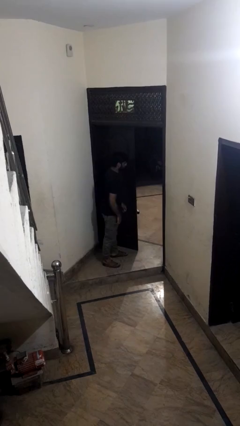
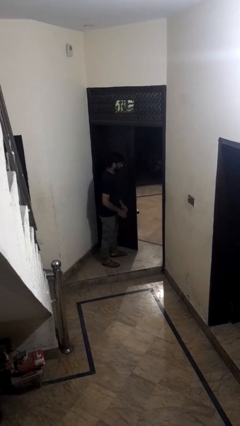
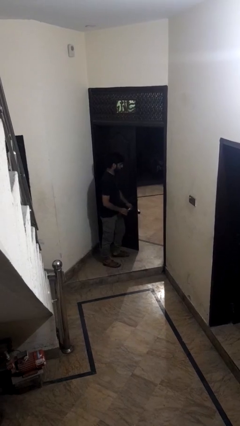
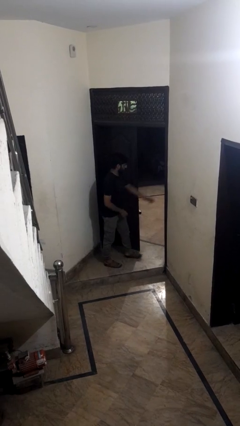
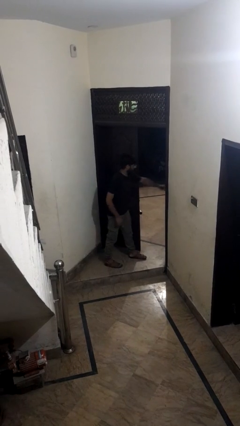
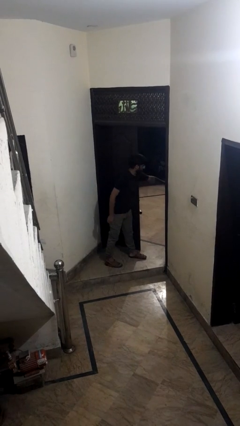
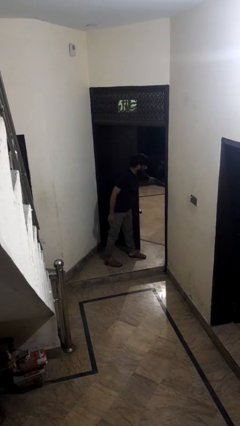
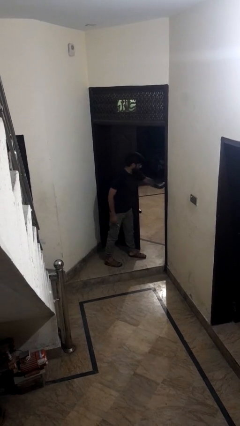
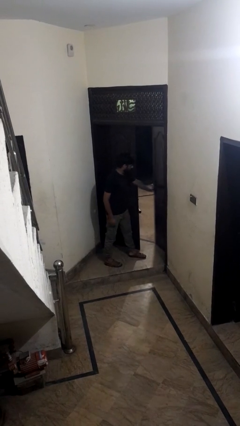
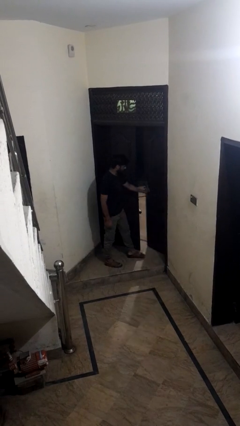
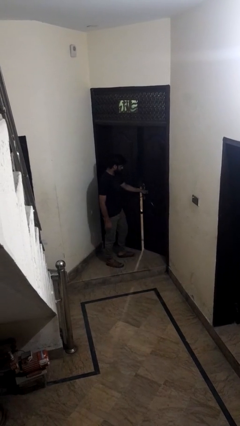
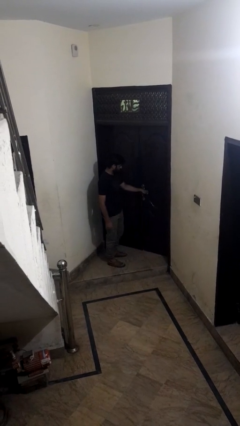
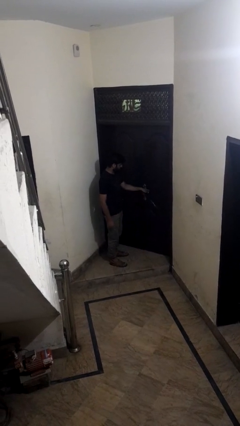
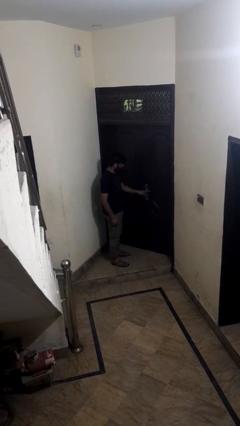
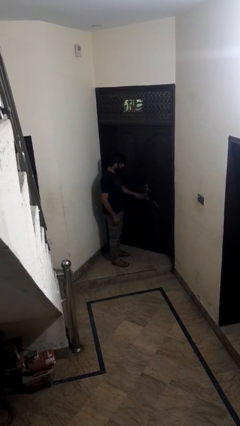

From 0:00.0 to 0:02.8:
person closes facility door

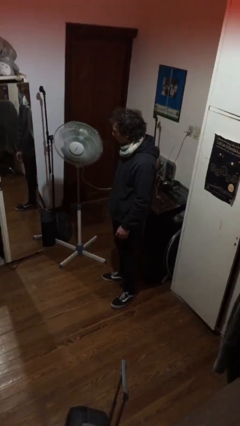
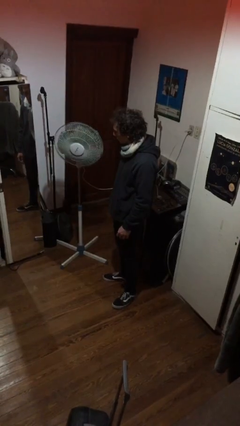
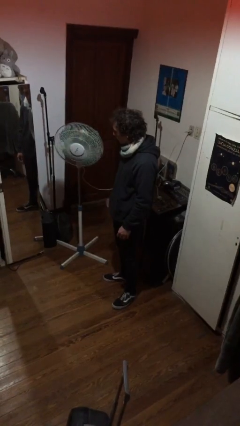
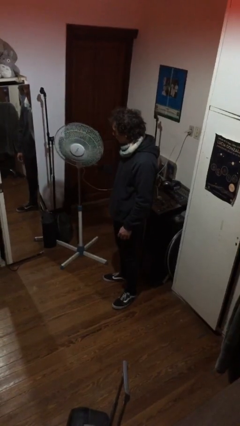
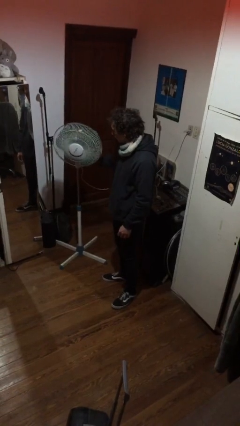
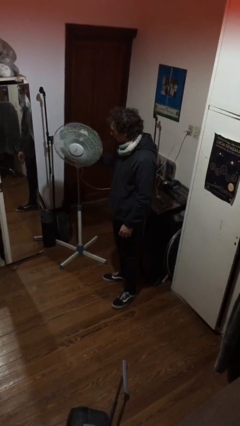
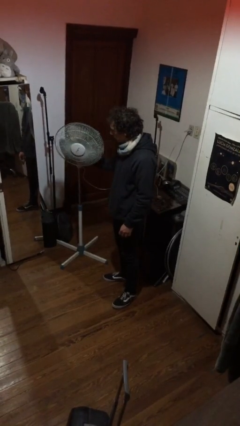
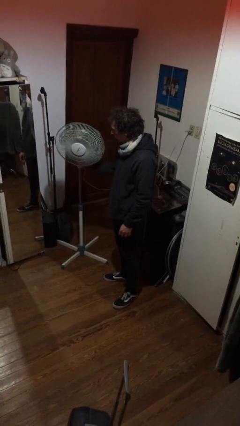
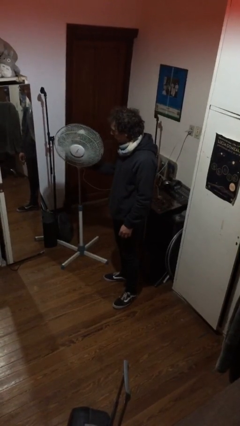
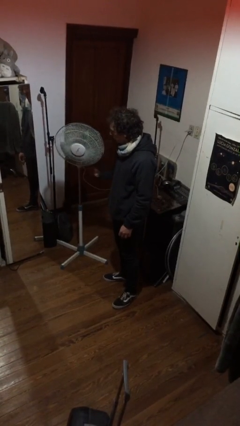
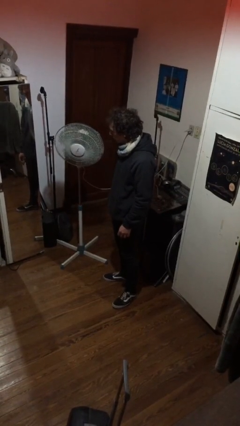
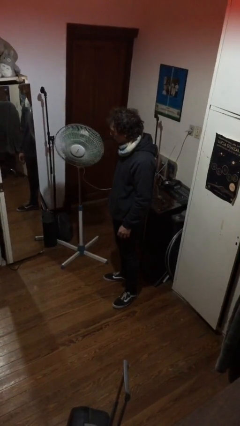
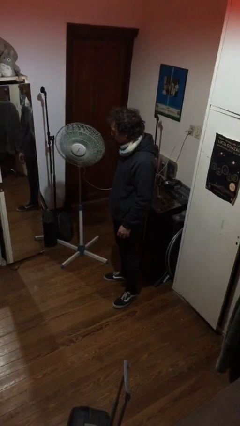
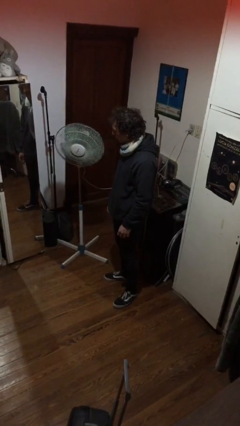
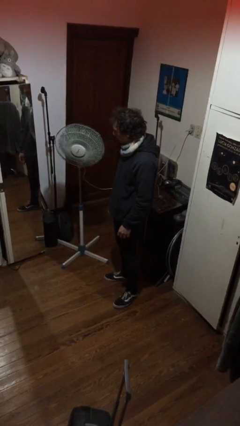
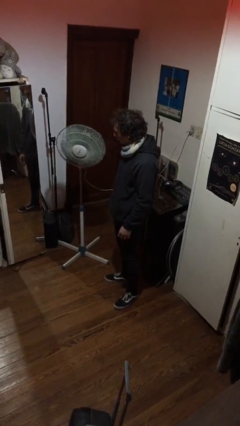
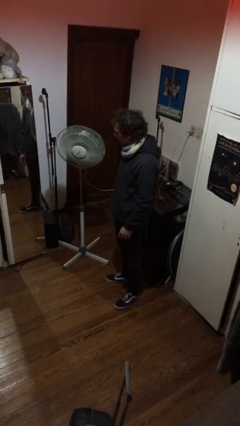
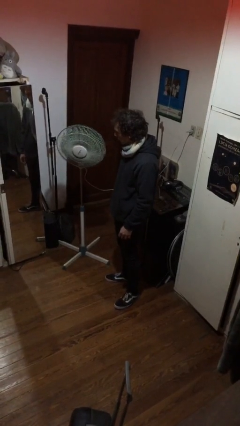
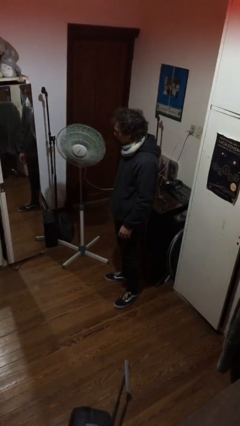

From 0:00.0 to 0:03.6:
person turns on fan

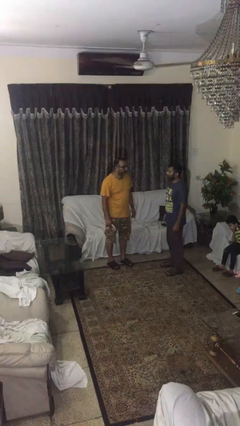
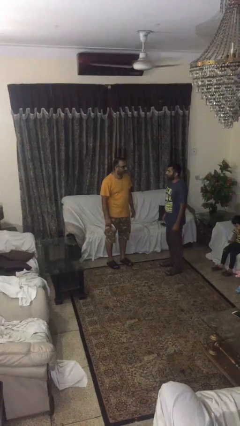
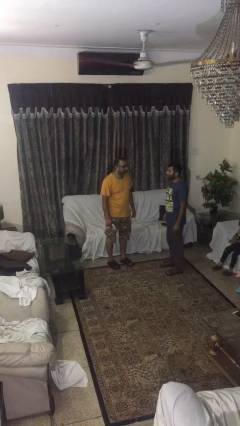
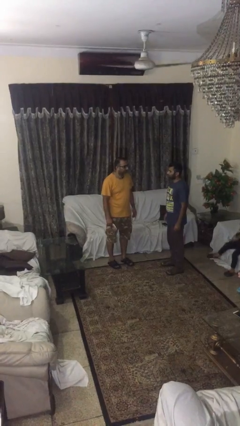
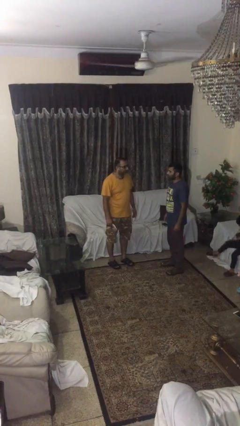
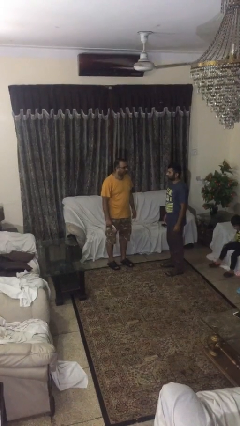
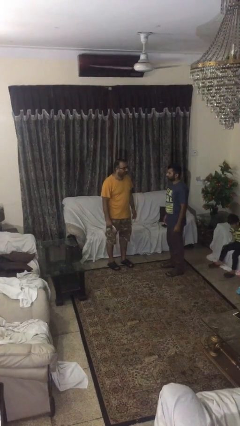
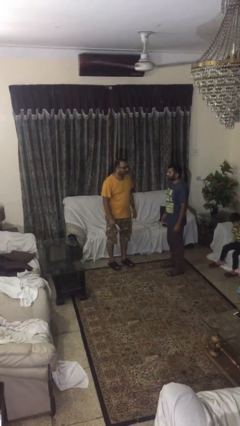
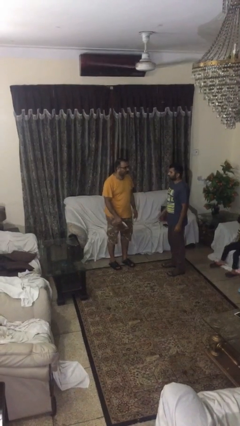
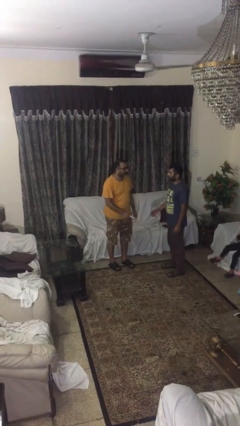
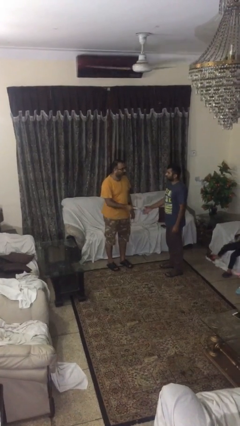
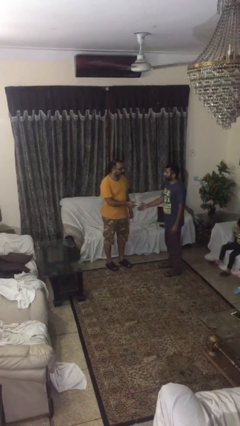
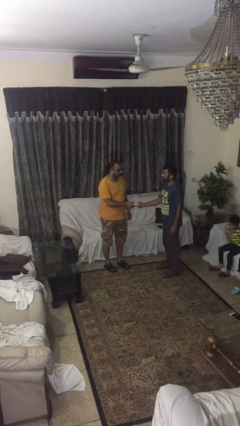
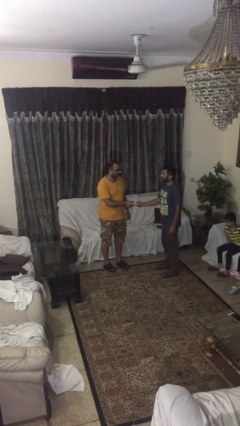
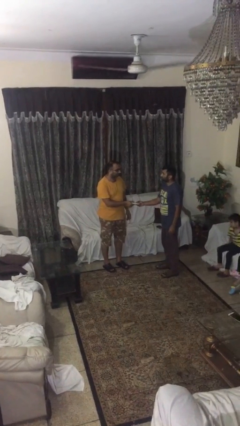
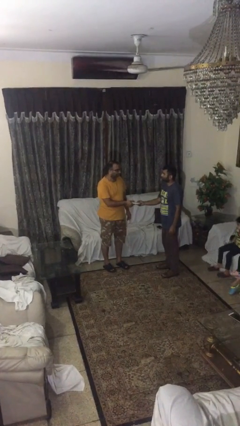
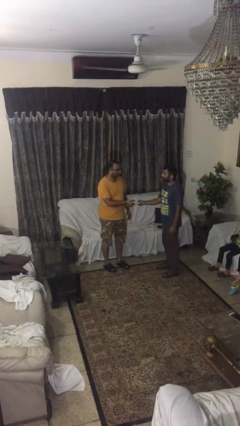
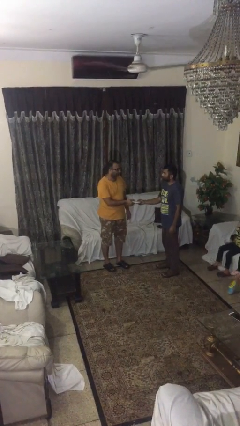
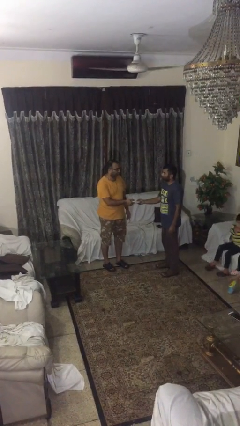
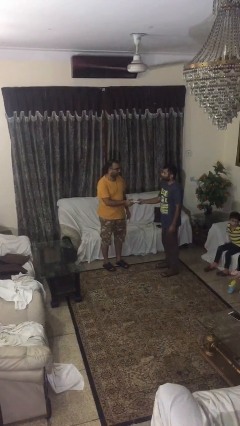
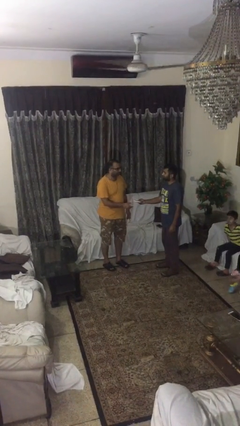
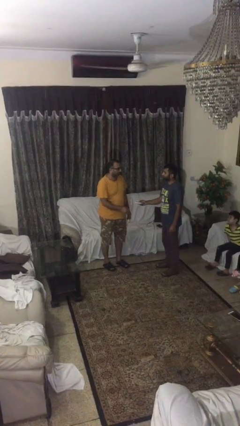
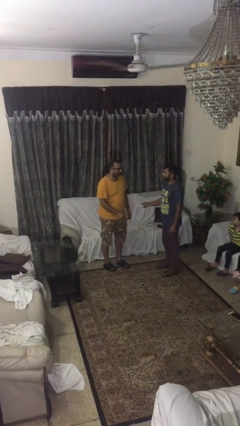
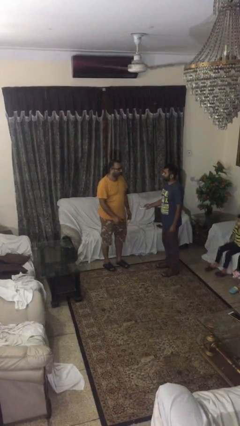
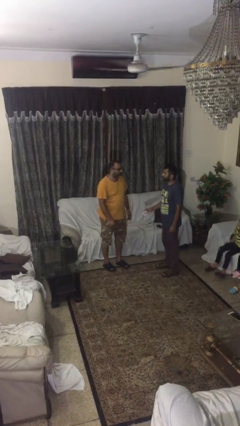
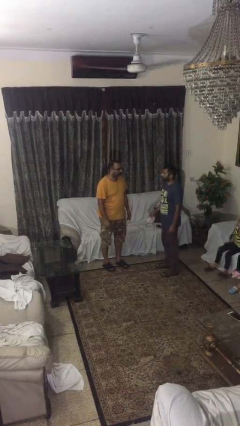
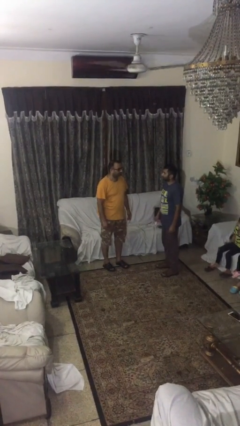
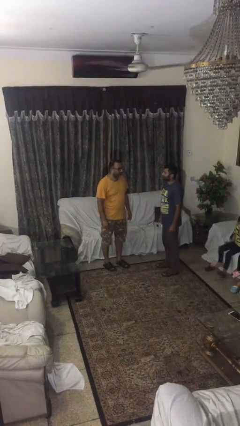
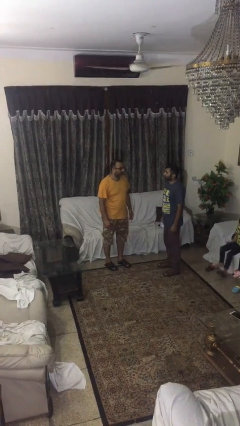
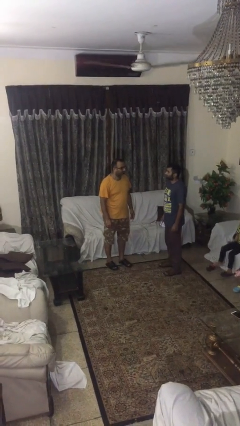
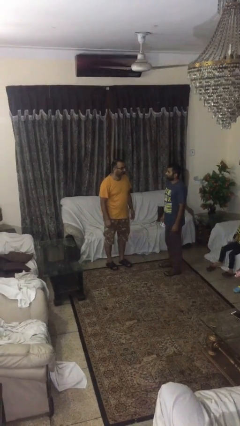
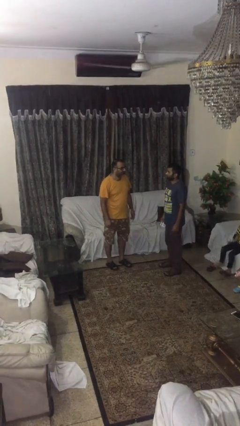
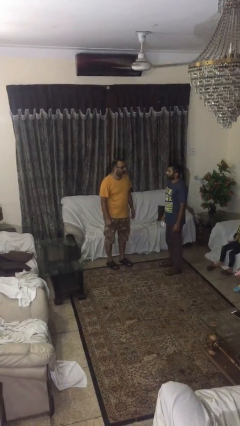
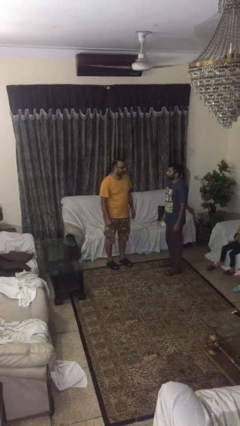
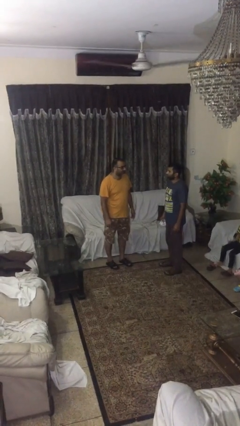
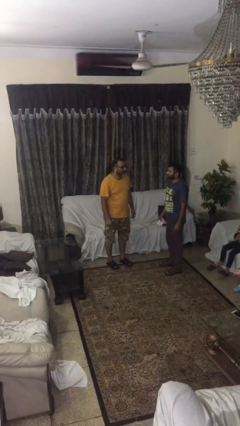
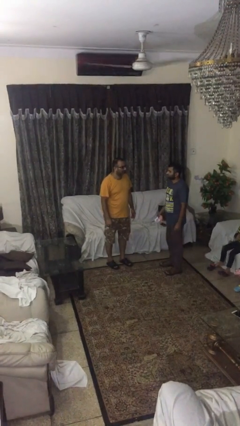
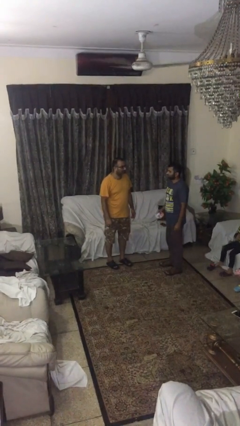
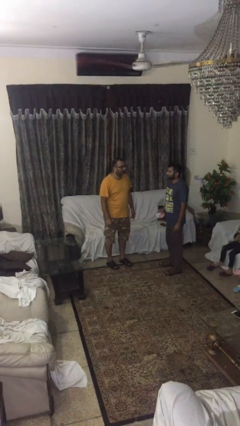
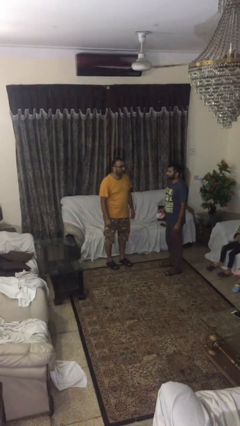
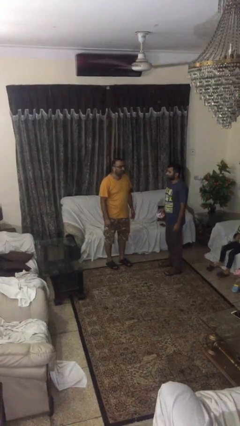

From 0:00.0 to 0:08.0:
person transfers object to person

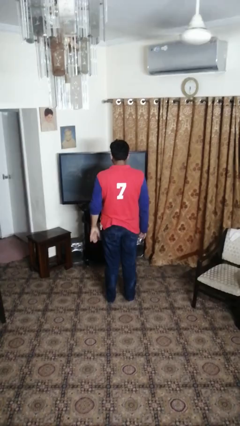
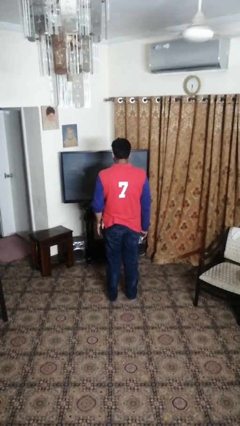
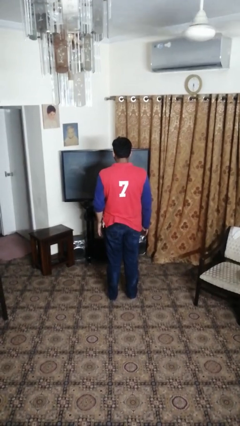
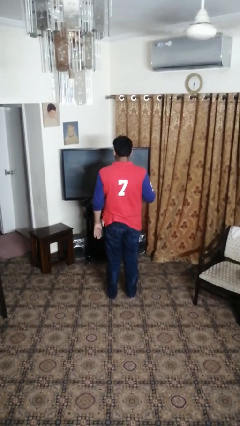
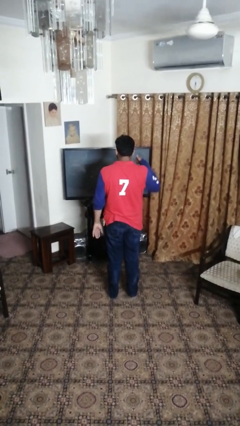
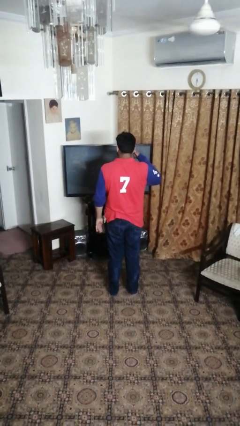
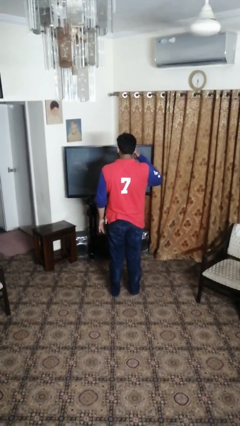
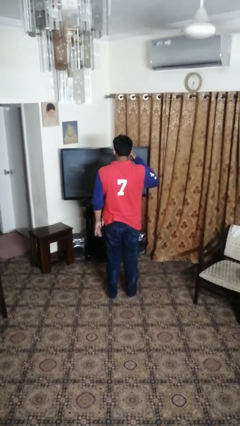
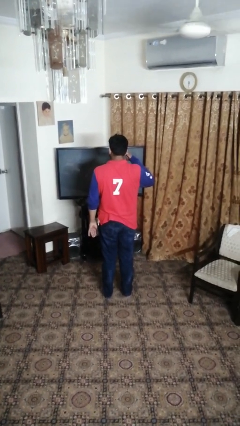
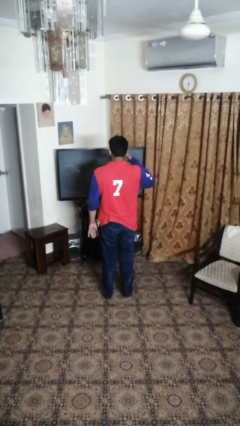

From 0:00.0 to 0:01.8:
person gestures call me

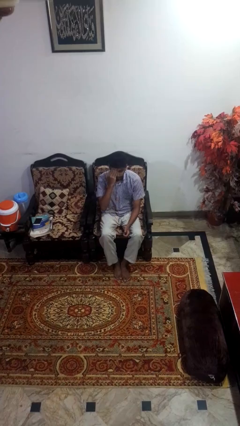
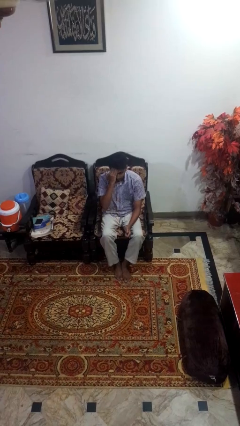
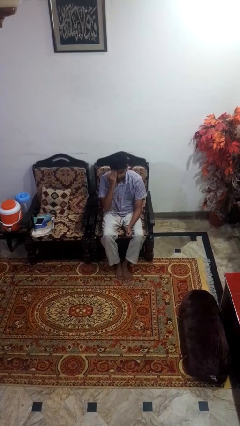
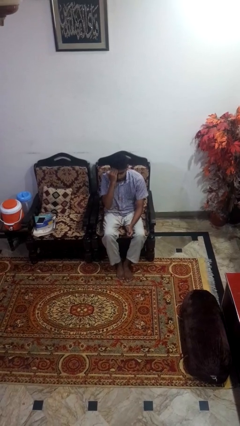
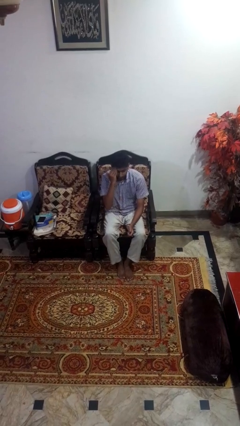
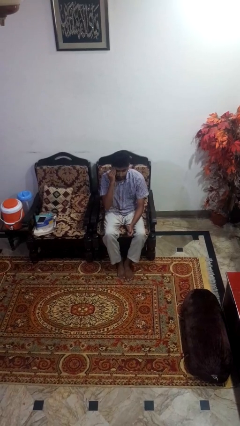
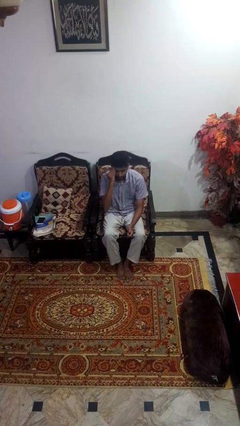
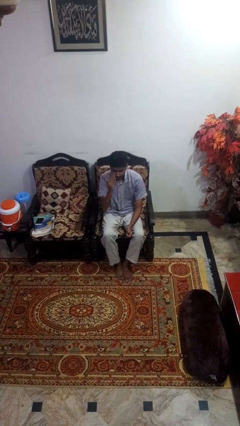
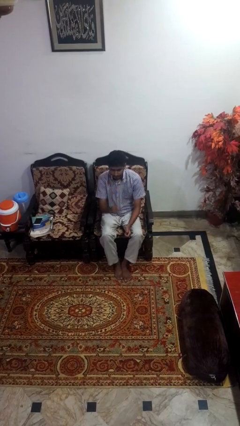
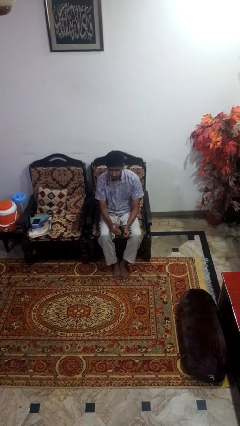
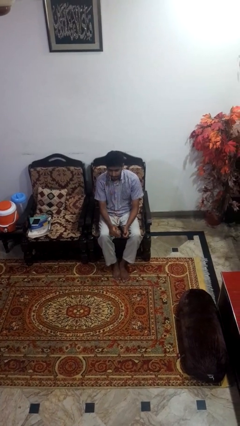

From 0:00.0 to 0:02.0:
person scratches face
